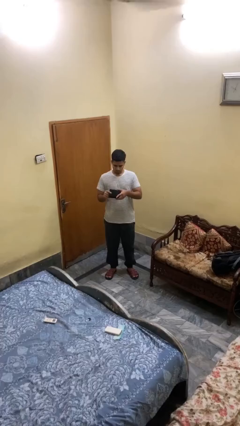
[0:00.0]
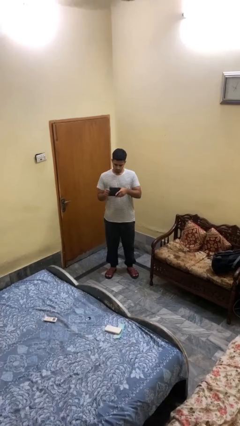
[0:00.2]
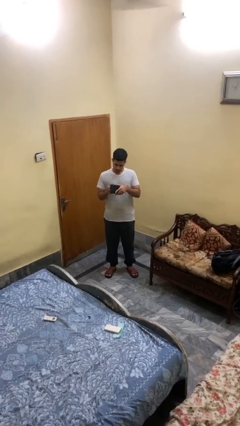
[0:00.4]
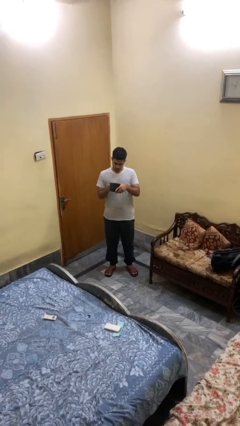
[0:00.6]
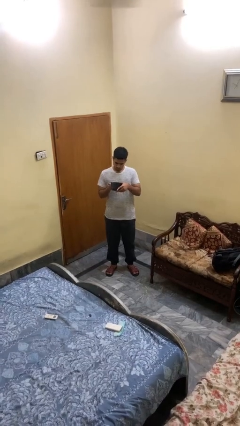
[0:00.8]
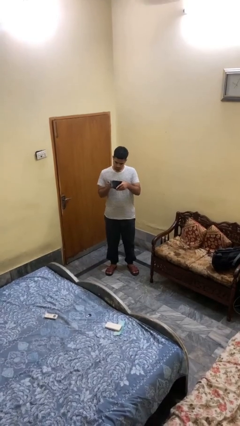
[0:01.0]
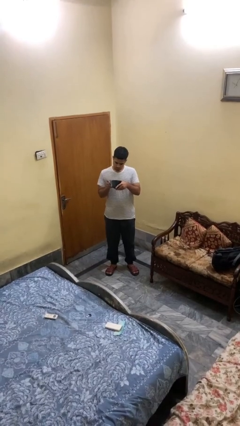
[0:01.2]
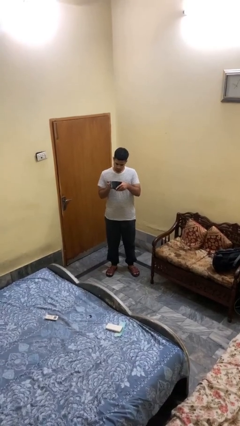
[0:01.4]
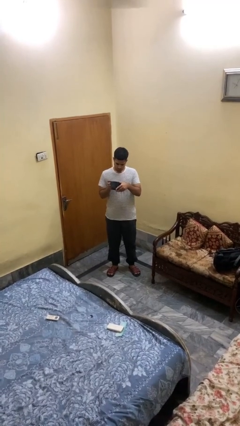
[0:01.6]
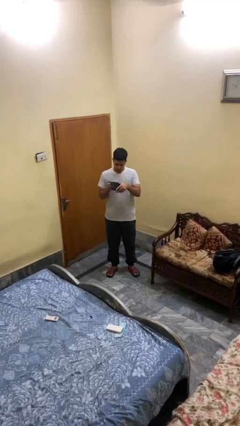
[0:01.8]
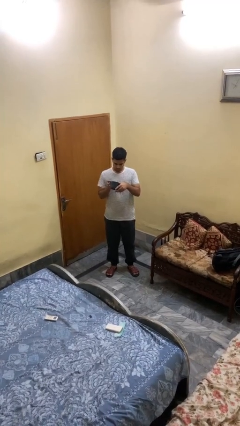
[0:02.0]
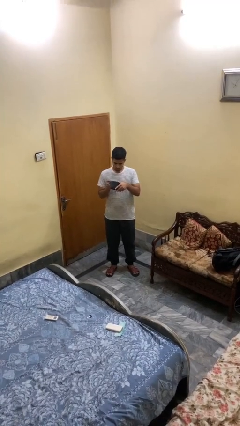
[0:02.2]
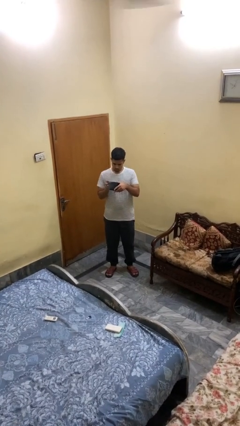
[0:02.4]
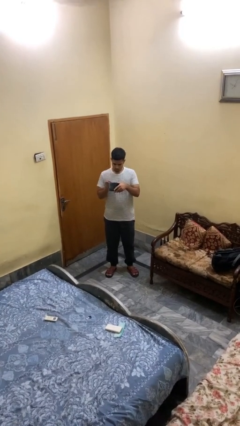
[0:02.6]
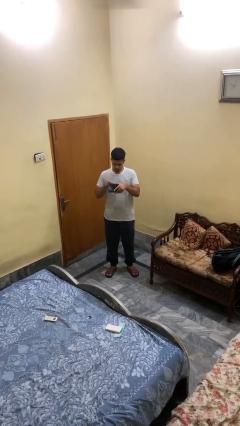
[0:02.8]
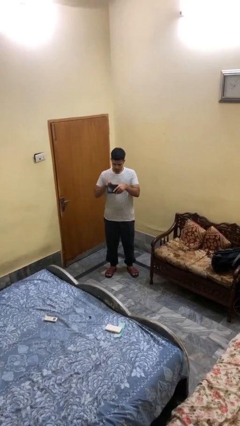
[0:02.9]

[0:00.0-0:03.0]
person searches in purse

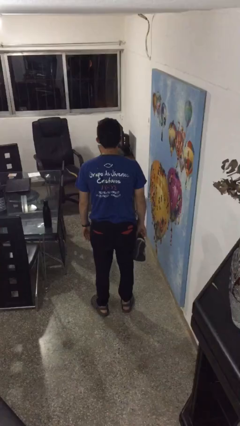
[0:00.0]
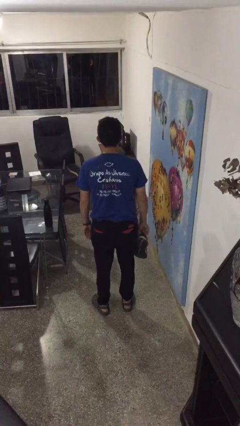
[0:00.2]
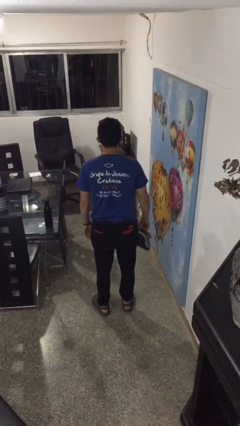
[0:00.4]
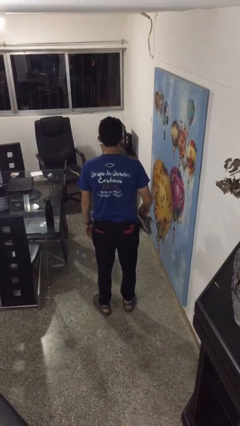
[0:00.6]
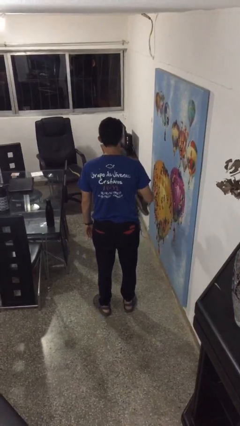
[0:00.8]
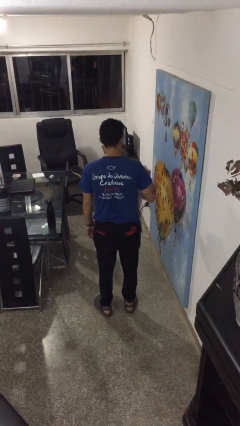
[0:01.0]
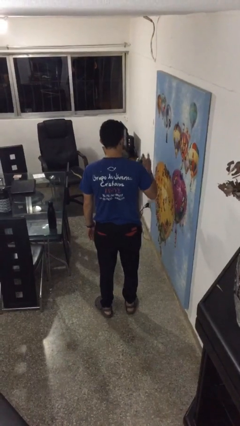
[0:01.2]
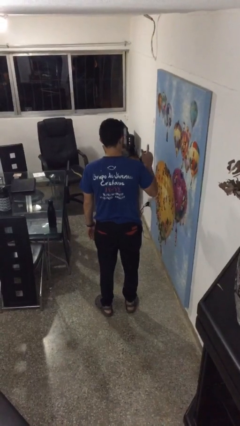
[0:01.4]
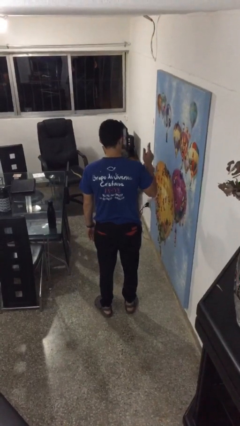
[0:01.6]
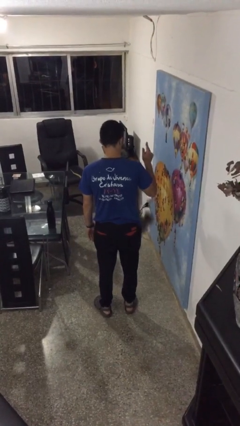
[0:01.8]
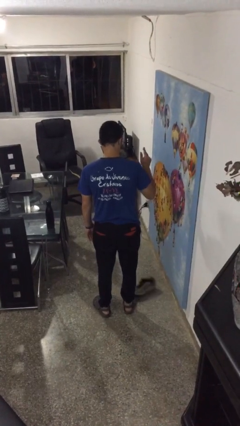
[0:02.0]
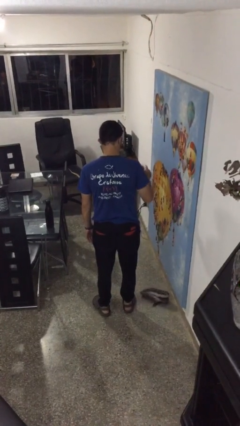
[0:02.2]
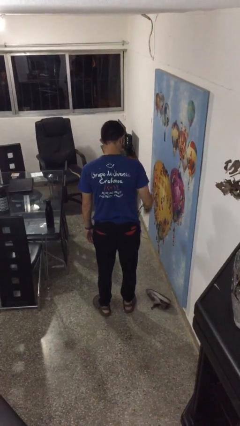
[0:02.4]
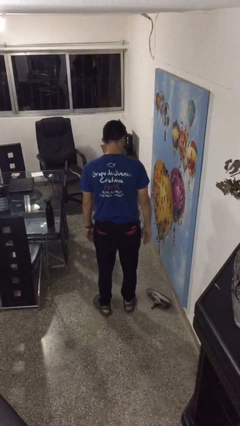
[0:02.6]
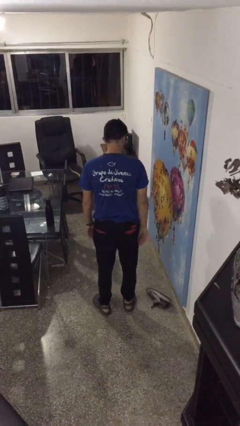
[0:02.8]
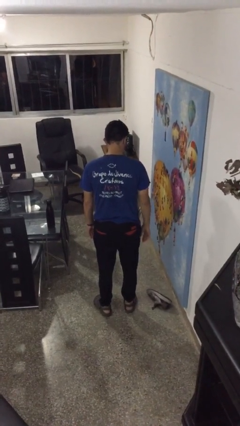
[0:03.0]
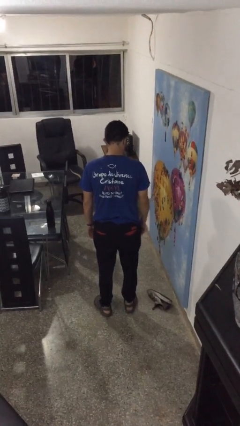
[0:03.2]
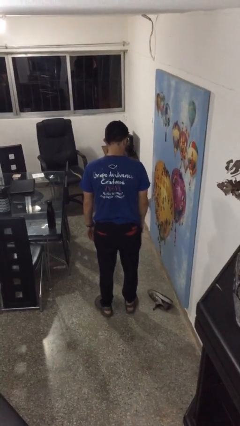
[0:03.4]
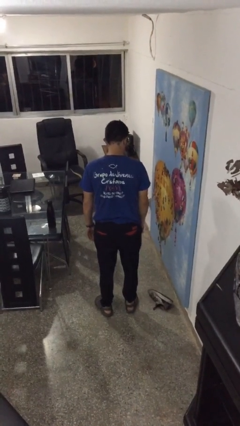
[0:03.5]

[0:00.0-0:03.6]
person drops object

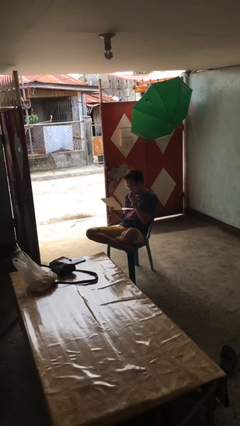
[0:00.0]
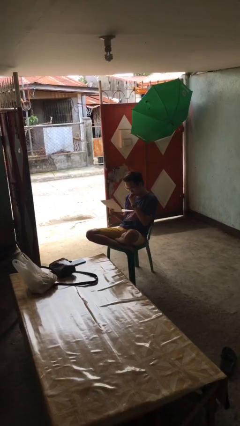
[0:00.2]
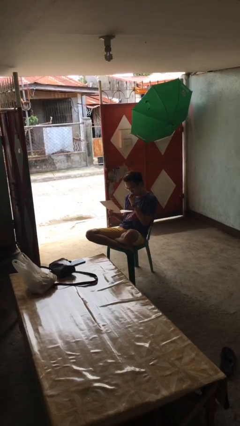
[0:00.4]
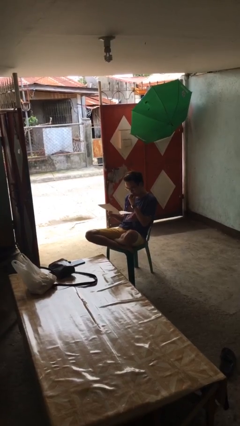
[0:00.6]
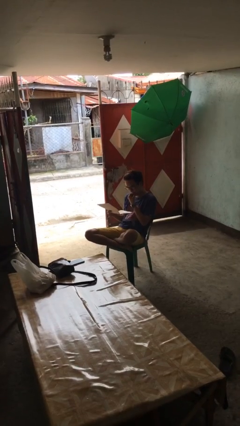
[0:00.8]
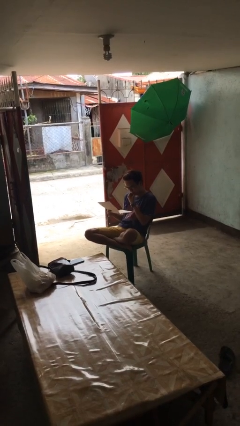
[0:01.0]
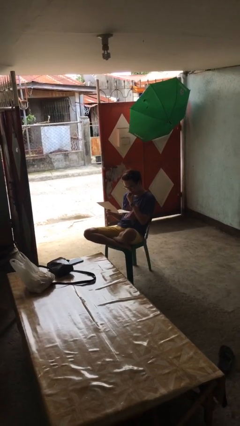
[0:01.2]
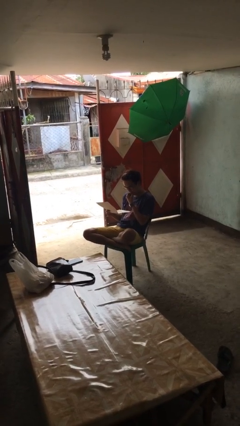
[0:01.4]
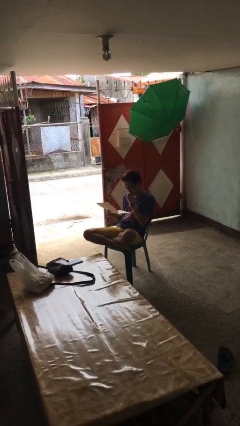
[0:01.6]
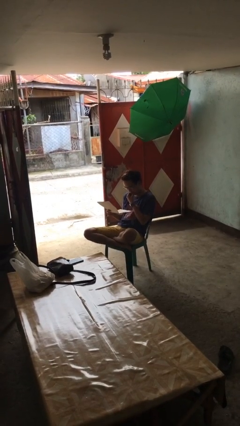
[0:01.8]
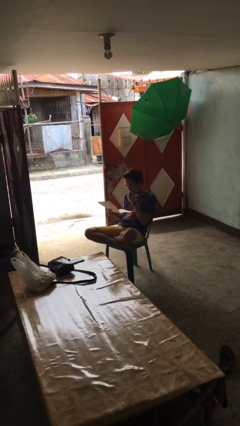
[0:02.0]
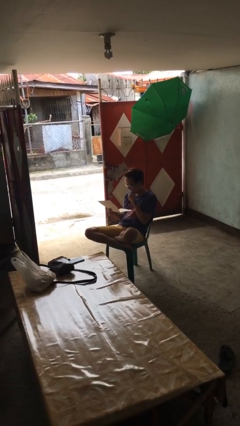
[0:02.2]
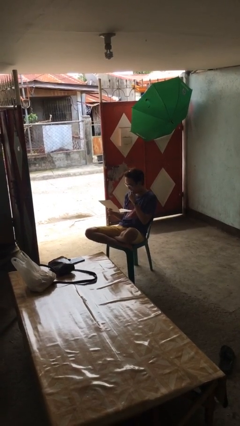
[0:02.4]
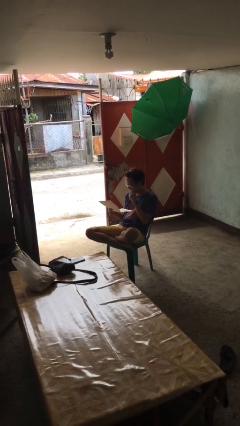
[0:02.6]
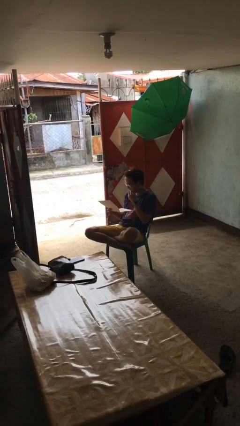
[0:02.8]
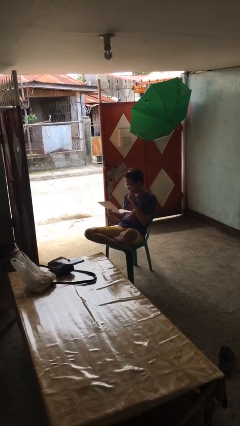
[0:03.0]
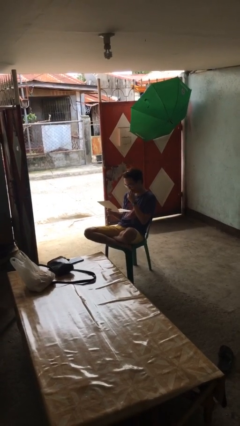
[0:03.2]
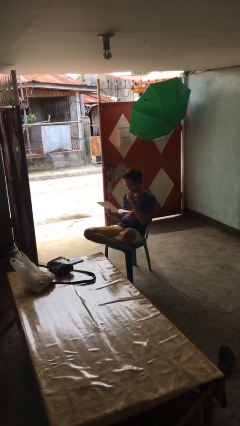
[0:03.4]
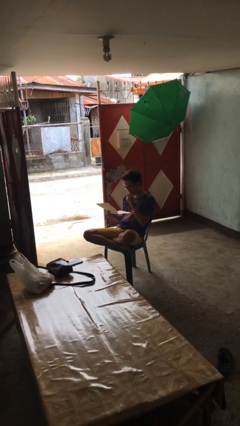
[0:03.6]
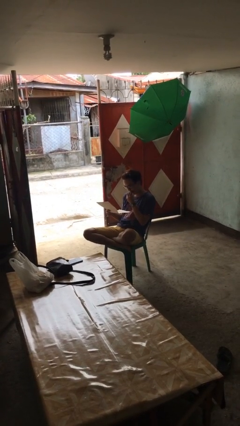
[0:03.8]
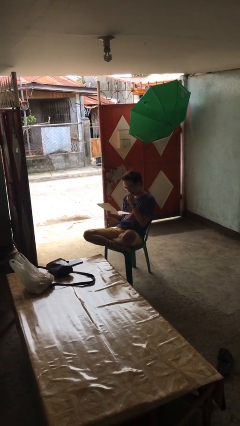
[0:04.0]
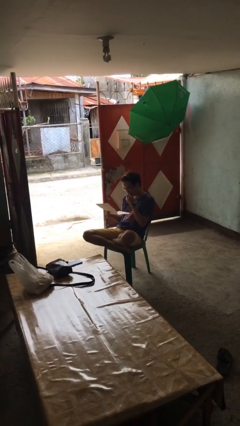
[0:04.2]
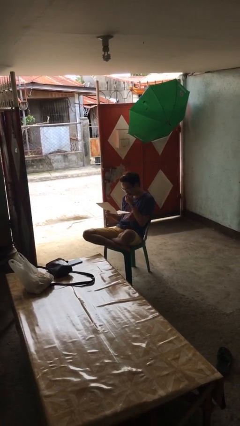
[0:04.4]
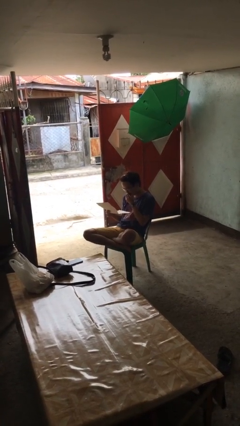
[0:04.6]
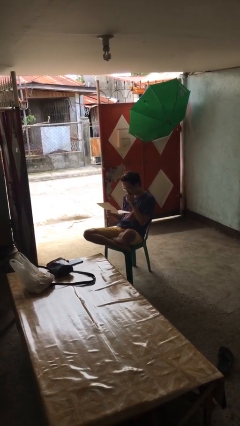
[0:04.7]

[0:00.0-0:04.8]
person reads document

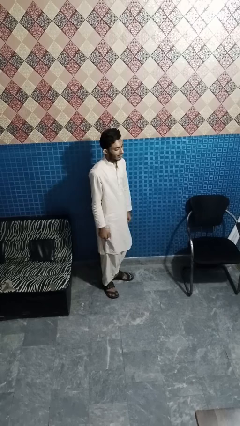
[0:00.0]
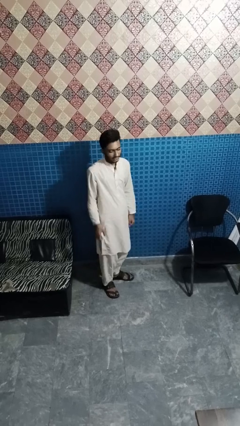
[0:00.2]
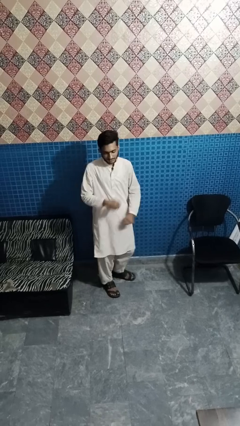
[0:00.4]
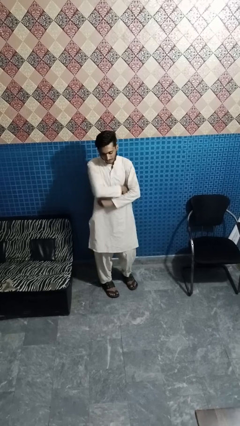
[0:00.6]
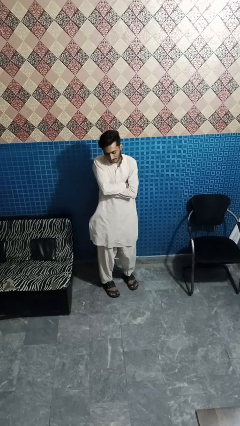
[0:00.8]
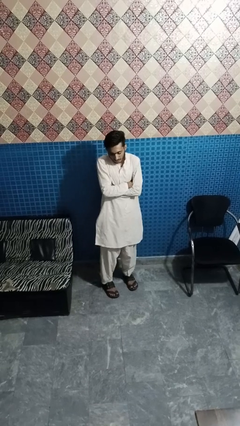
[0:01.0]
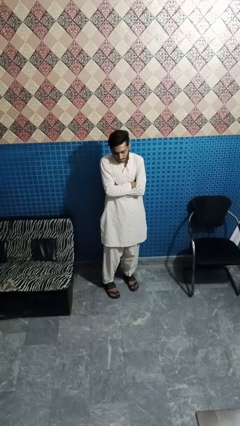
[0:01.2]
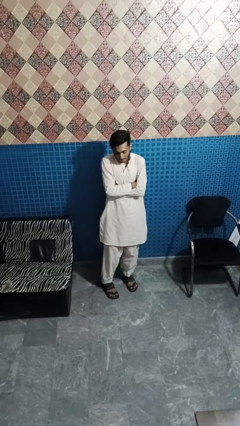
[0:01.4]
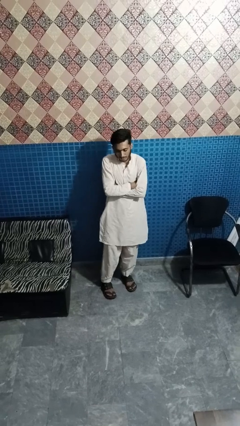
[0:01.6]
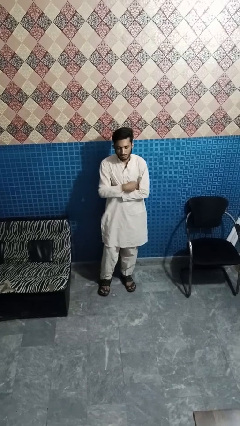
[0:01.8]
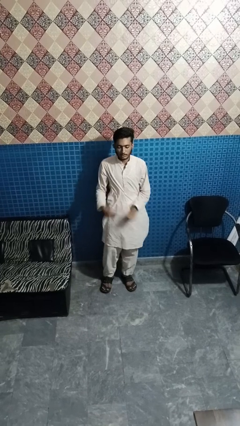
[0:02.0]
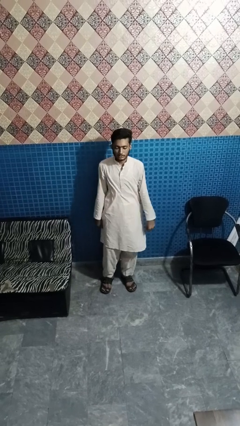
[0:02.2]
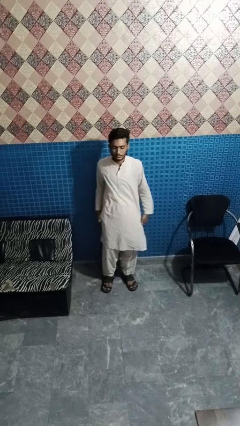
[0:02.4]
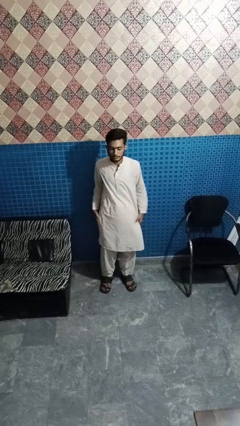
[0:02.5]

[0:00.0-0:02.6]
person crosses arms

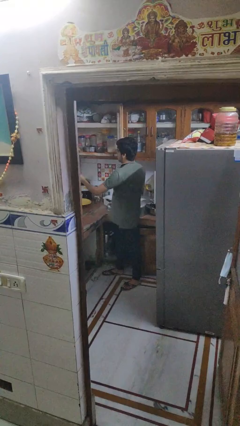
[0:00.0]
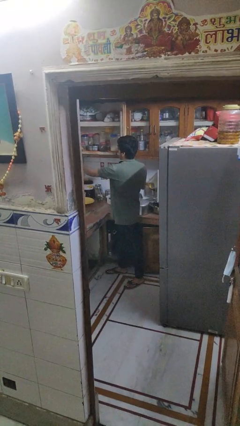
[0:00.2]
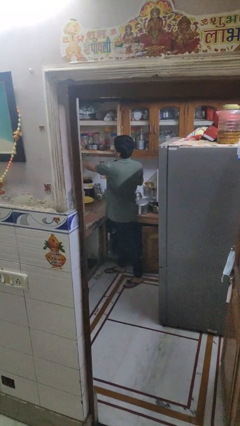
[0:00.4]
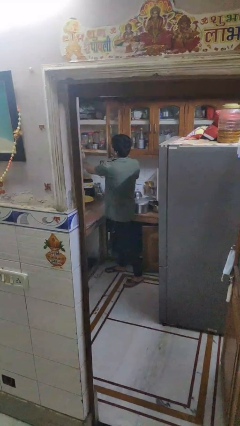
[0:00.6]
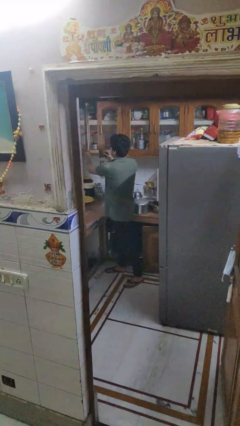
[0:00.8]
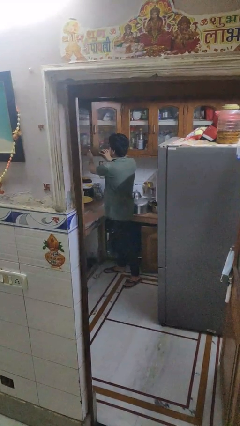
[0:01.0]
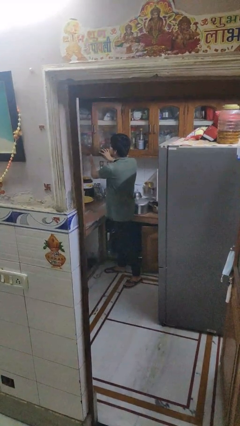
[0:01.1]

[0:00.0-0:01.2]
person closes cabinet

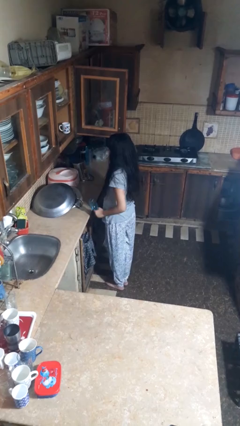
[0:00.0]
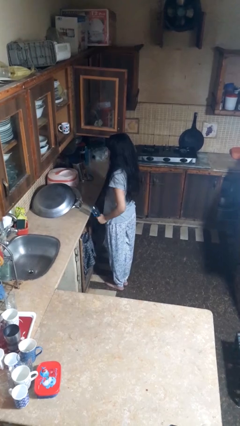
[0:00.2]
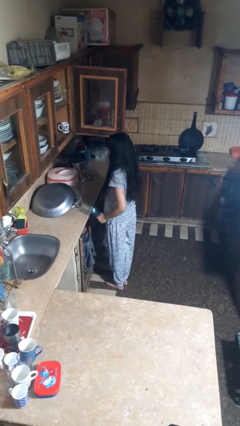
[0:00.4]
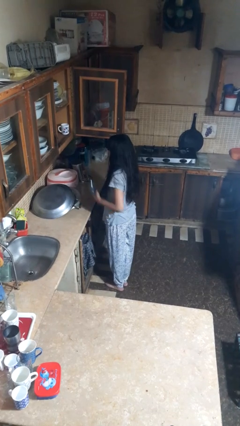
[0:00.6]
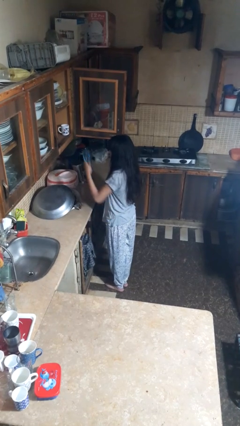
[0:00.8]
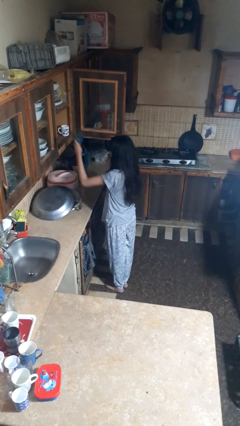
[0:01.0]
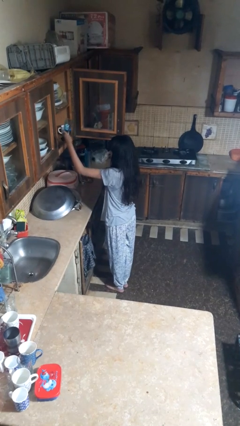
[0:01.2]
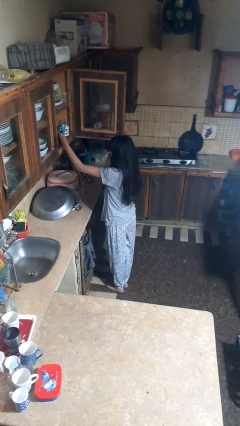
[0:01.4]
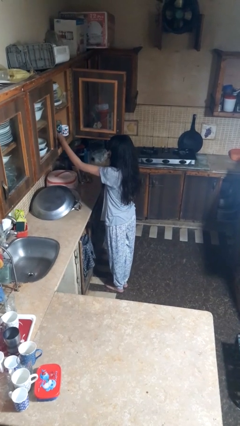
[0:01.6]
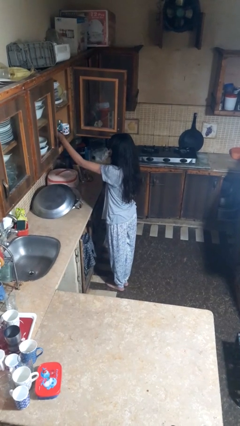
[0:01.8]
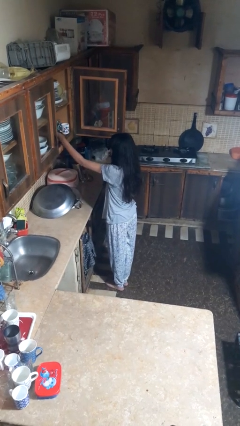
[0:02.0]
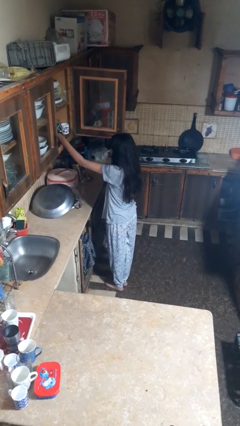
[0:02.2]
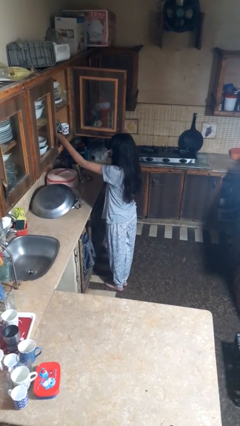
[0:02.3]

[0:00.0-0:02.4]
person puts object in cabinet
